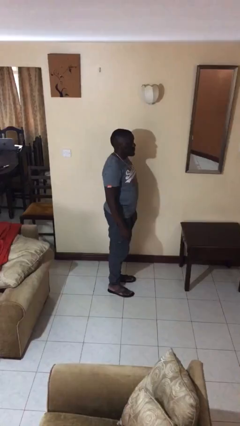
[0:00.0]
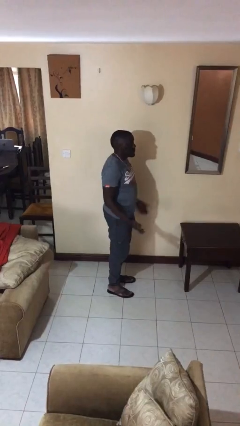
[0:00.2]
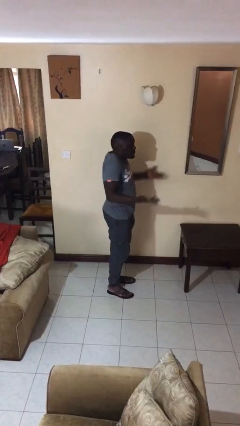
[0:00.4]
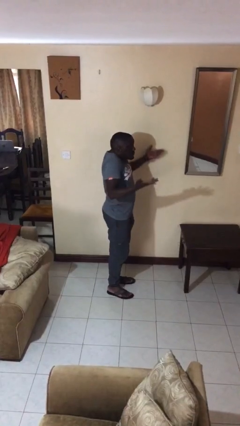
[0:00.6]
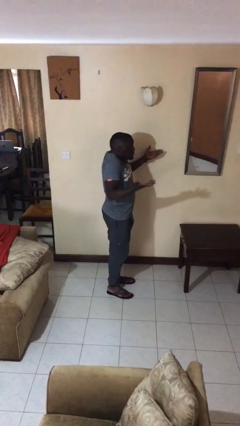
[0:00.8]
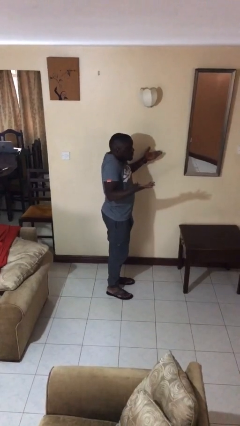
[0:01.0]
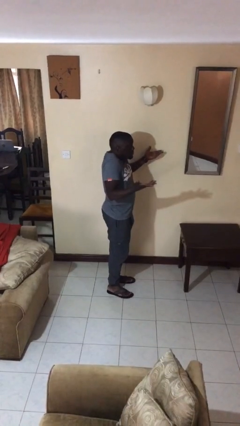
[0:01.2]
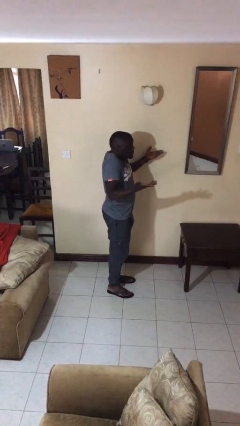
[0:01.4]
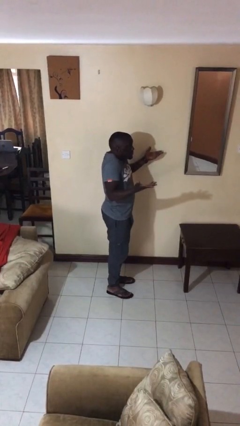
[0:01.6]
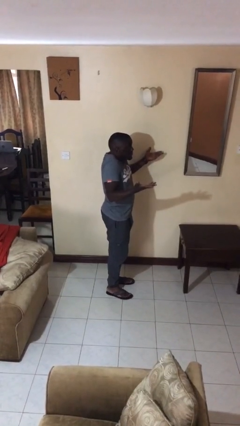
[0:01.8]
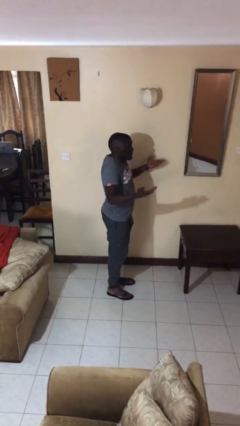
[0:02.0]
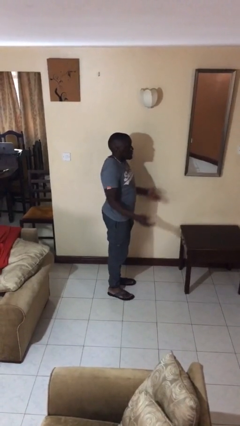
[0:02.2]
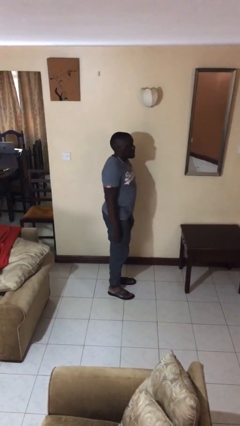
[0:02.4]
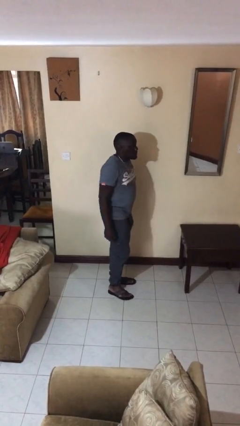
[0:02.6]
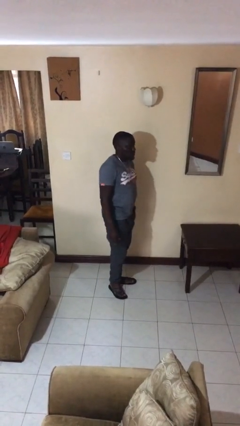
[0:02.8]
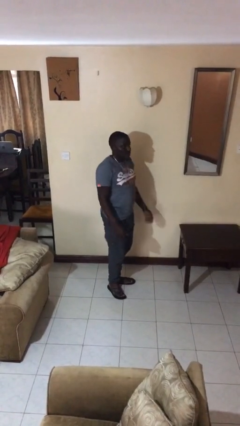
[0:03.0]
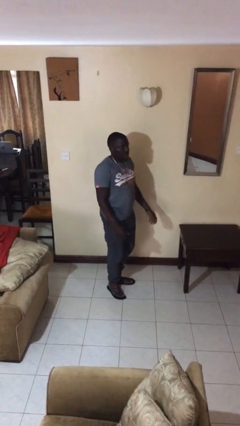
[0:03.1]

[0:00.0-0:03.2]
person shrugs

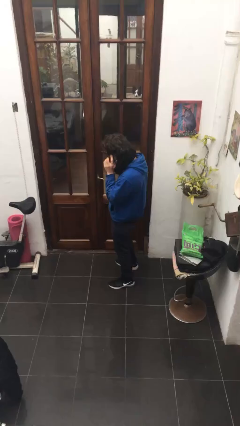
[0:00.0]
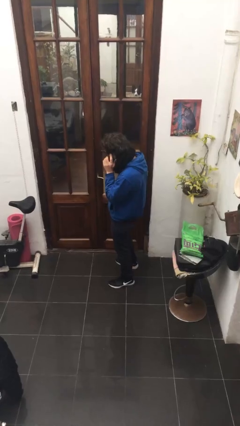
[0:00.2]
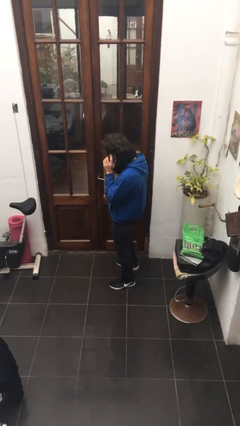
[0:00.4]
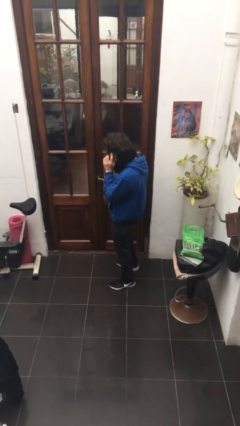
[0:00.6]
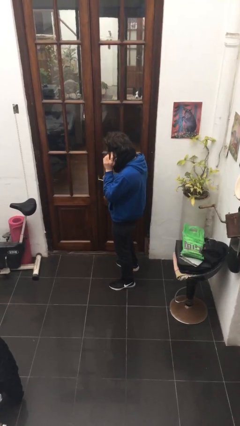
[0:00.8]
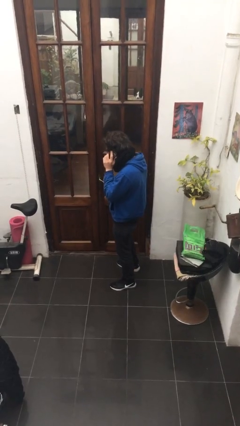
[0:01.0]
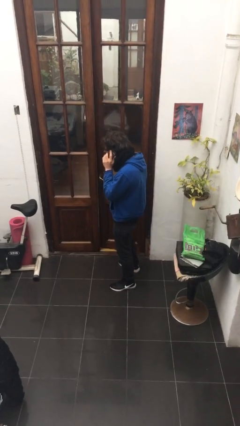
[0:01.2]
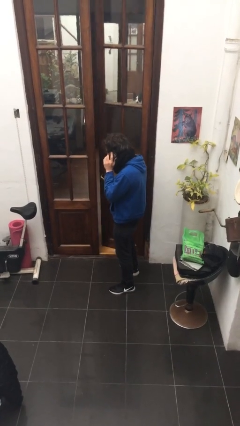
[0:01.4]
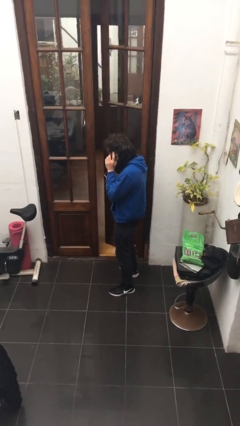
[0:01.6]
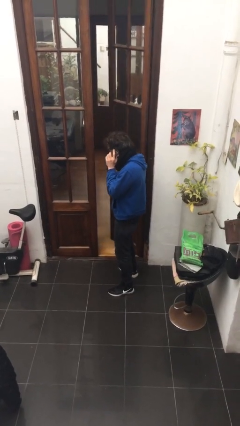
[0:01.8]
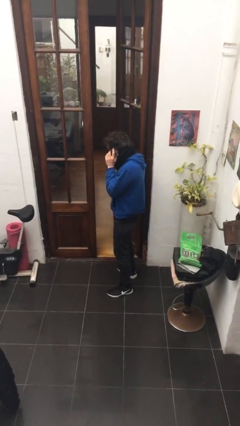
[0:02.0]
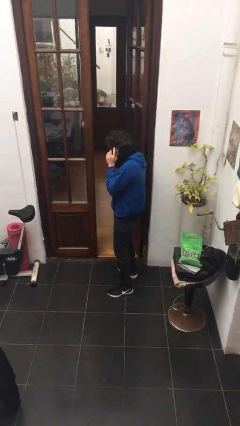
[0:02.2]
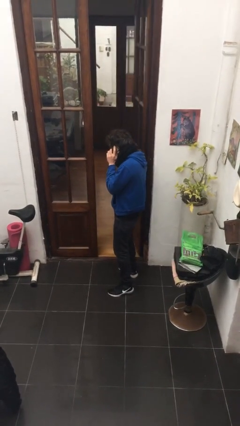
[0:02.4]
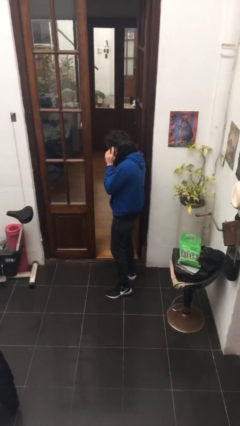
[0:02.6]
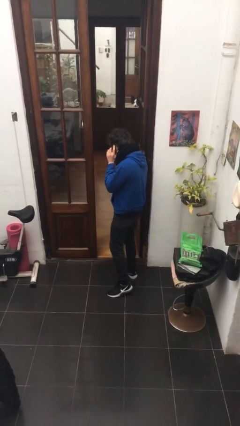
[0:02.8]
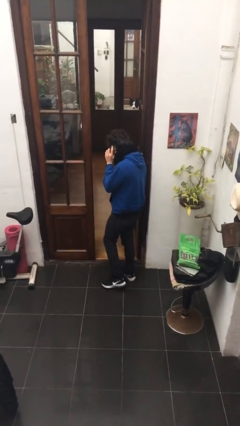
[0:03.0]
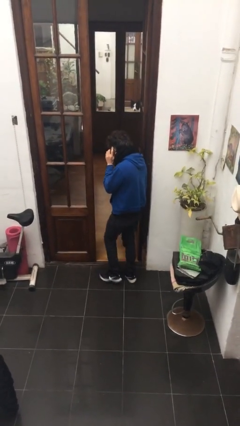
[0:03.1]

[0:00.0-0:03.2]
person opens facility door

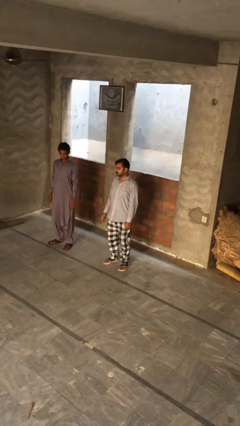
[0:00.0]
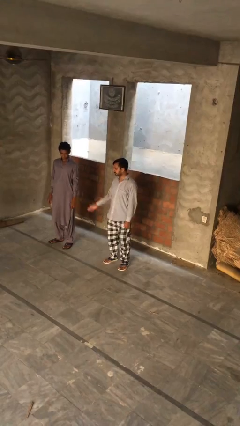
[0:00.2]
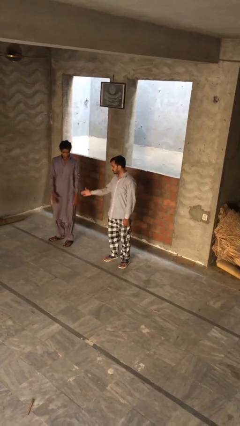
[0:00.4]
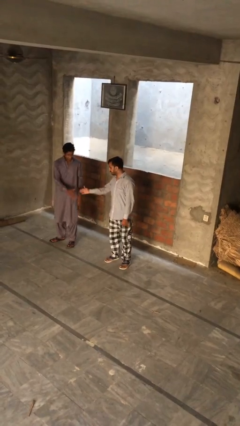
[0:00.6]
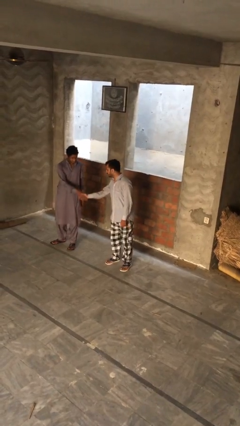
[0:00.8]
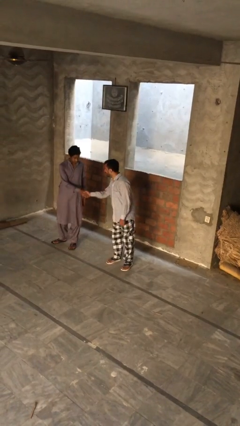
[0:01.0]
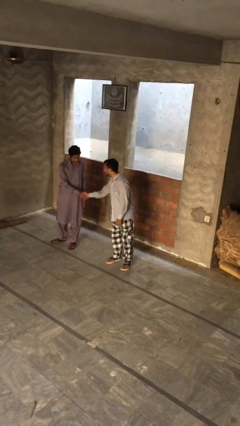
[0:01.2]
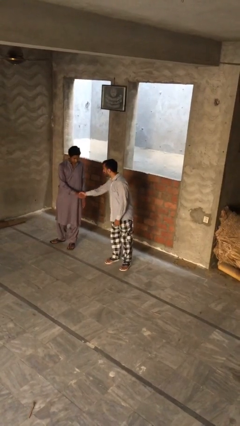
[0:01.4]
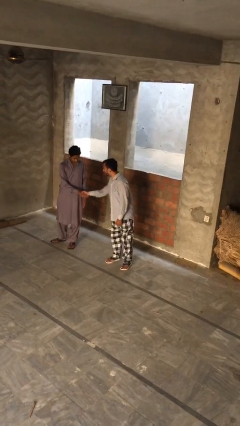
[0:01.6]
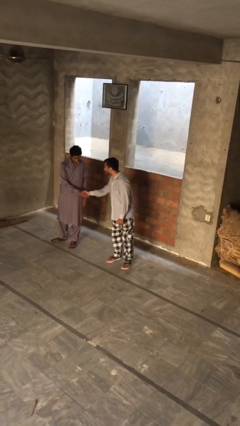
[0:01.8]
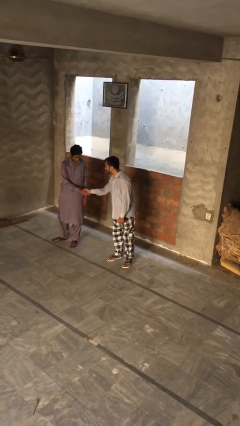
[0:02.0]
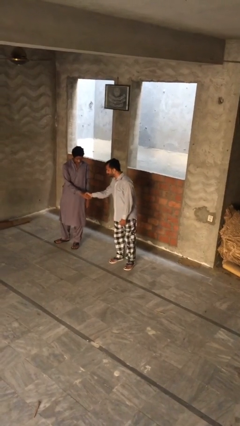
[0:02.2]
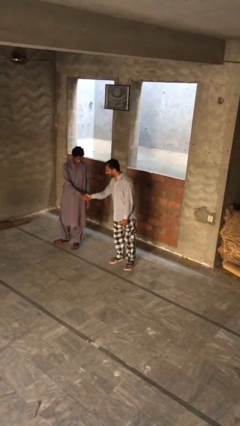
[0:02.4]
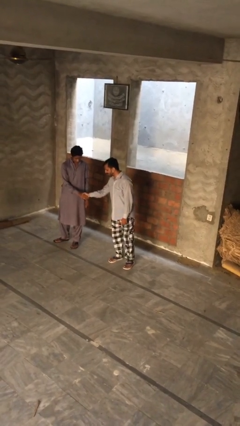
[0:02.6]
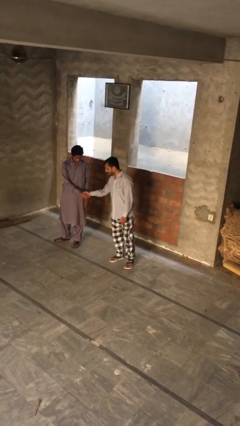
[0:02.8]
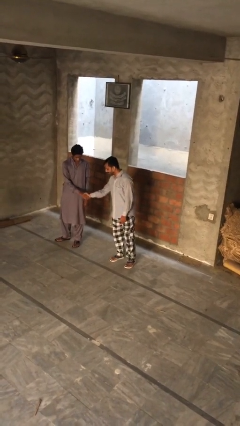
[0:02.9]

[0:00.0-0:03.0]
person shakes hand

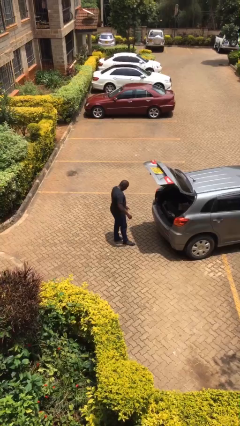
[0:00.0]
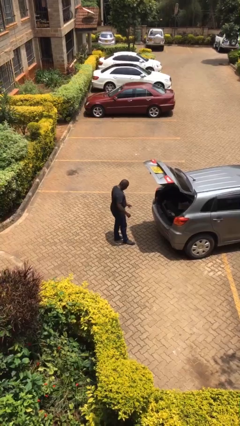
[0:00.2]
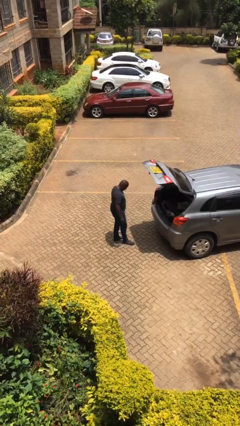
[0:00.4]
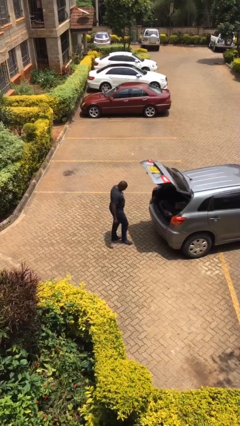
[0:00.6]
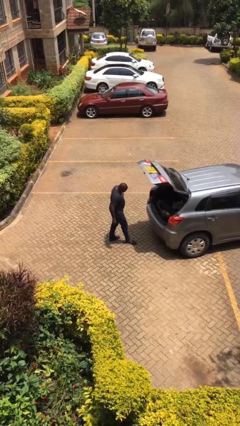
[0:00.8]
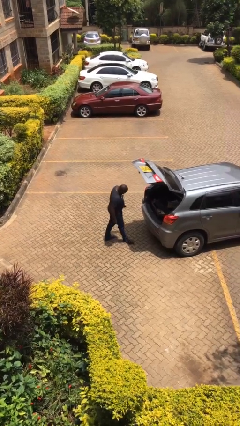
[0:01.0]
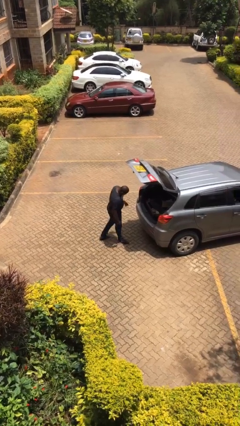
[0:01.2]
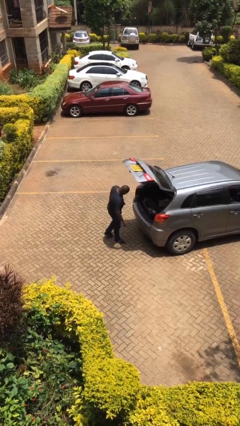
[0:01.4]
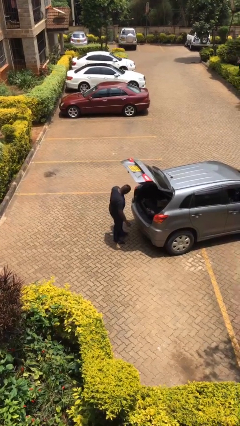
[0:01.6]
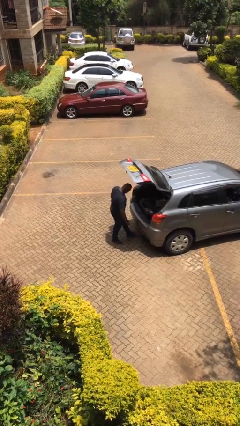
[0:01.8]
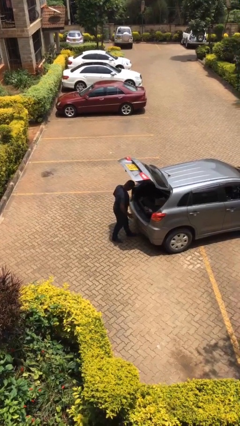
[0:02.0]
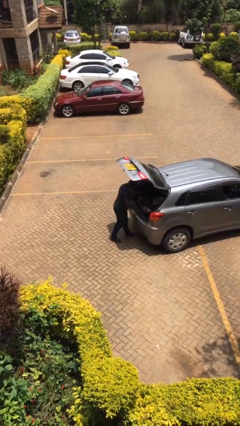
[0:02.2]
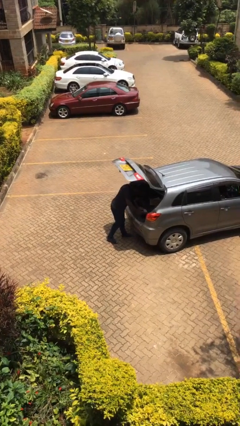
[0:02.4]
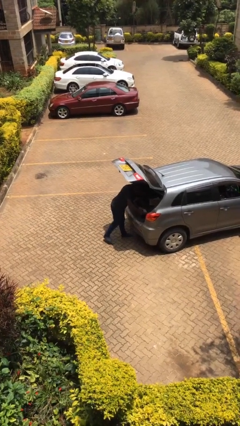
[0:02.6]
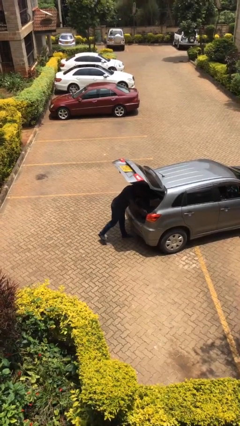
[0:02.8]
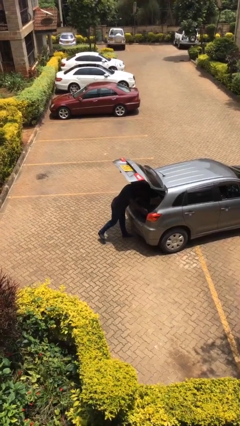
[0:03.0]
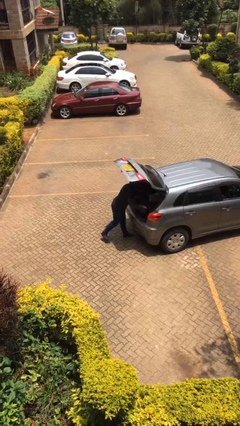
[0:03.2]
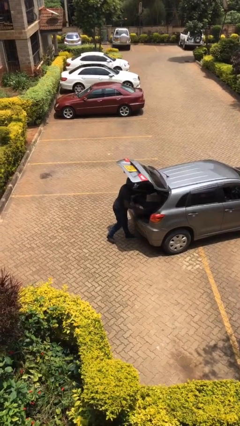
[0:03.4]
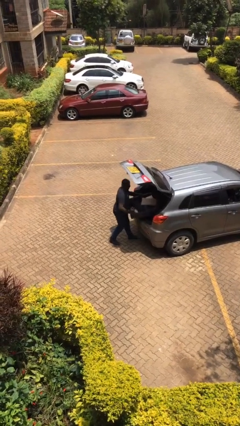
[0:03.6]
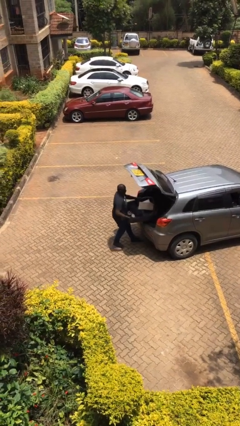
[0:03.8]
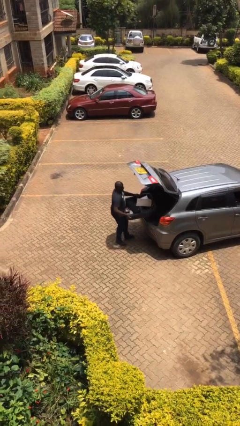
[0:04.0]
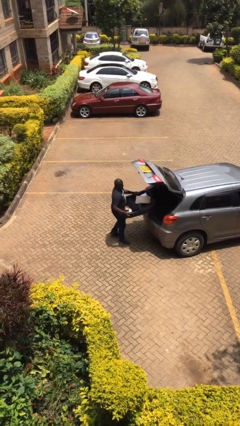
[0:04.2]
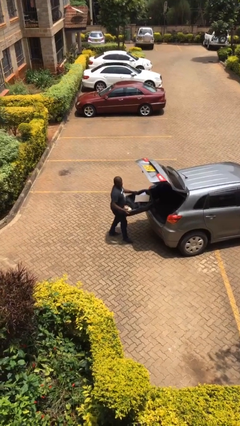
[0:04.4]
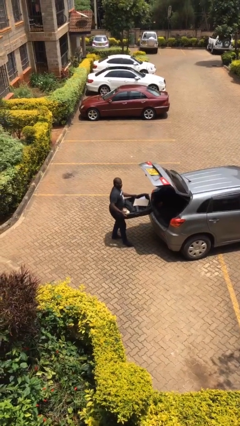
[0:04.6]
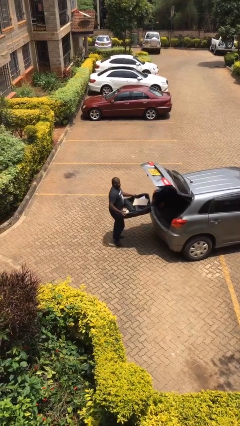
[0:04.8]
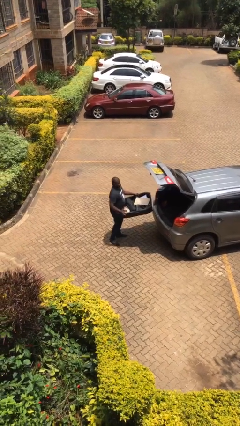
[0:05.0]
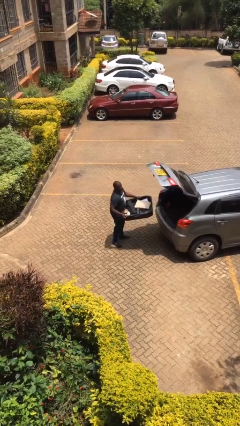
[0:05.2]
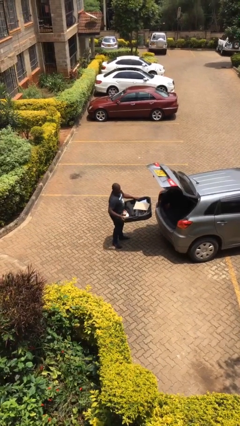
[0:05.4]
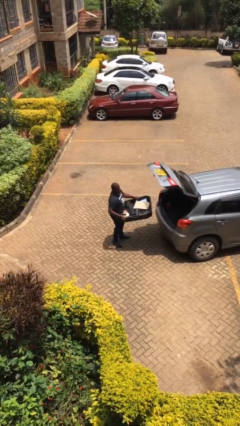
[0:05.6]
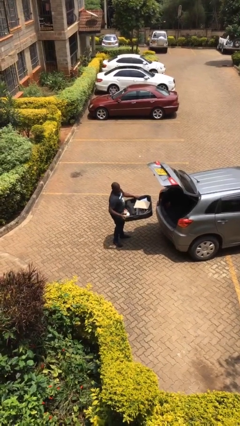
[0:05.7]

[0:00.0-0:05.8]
person unloads car

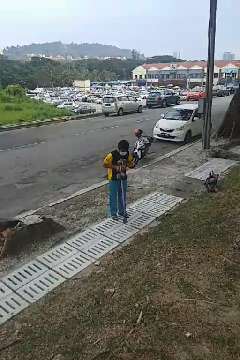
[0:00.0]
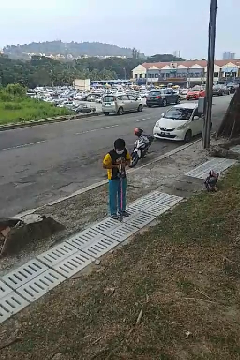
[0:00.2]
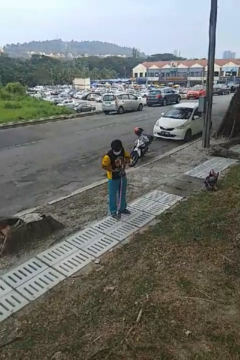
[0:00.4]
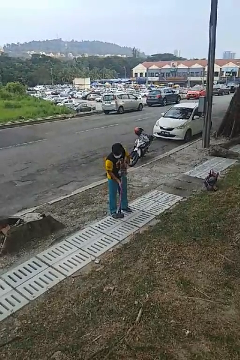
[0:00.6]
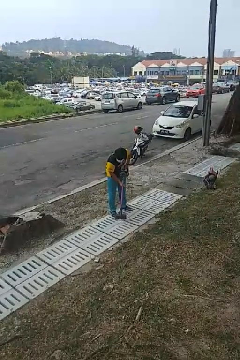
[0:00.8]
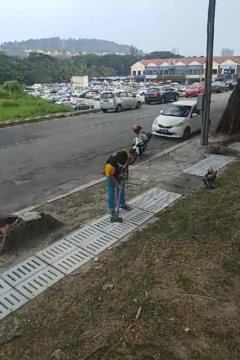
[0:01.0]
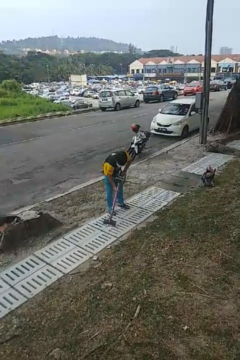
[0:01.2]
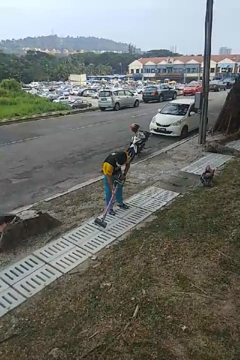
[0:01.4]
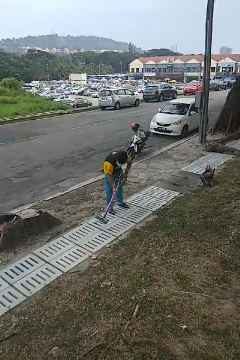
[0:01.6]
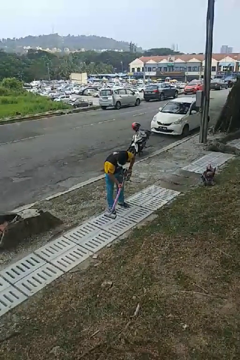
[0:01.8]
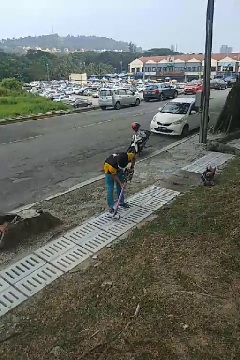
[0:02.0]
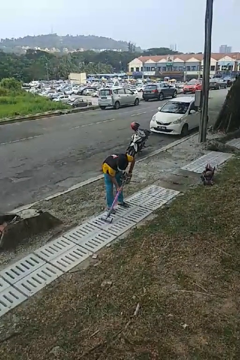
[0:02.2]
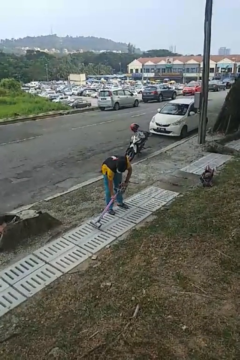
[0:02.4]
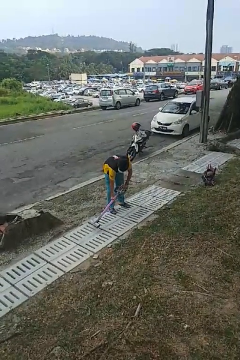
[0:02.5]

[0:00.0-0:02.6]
person vacuums carpet
